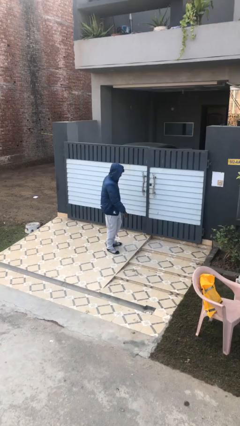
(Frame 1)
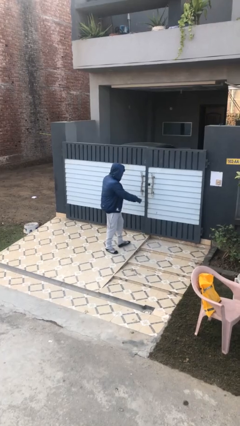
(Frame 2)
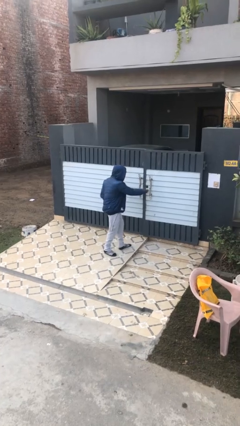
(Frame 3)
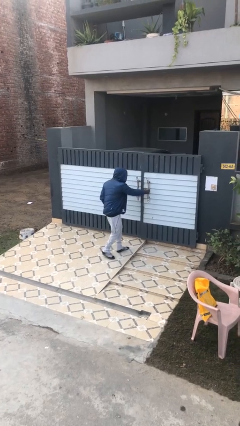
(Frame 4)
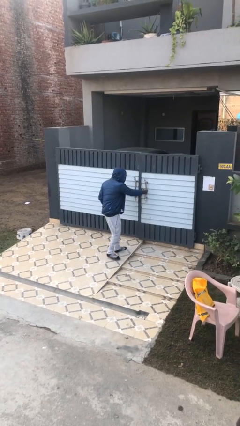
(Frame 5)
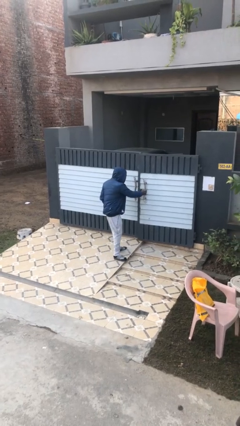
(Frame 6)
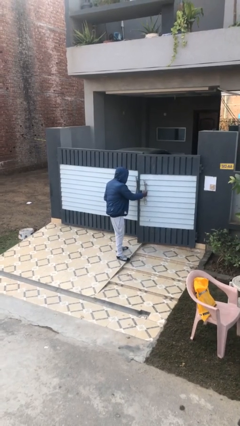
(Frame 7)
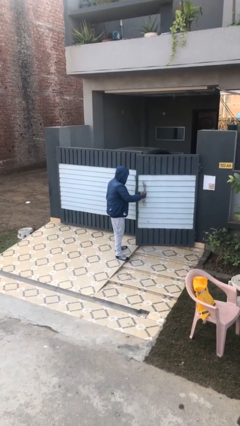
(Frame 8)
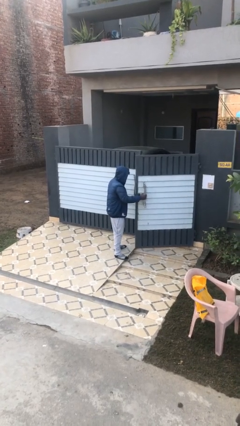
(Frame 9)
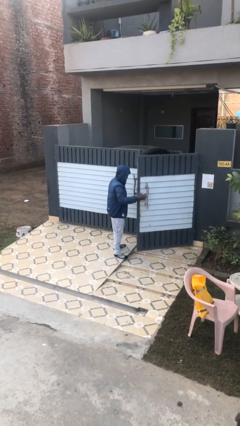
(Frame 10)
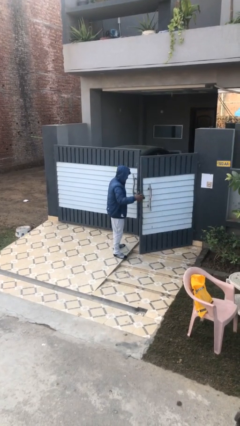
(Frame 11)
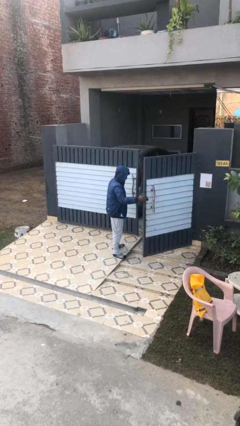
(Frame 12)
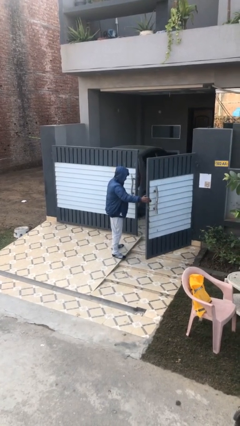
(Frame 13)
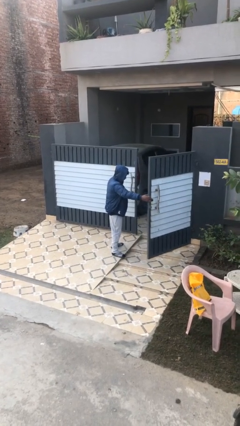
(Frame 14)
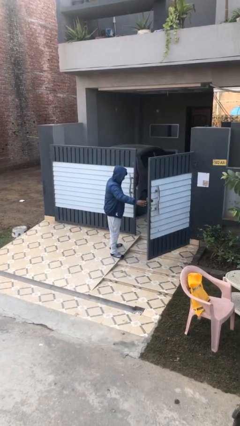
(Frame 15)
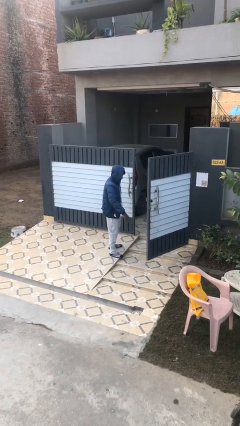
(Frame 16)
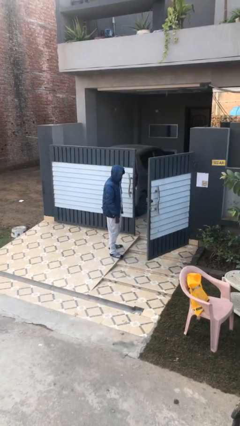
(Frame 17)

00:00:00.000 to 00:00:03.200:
person opens facility door

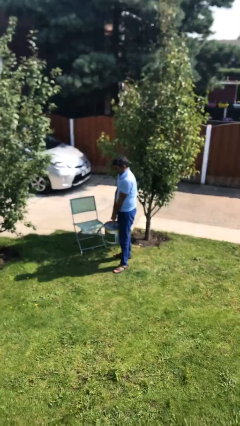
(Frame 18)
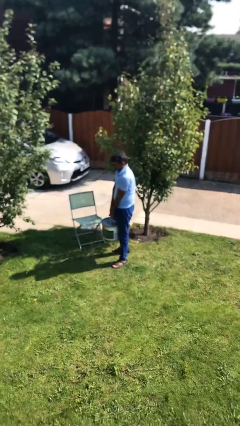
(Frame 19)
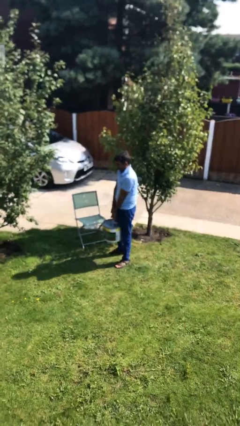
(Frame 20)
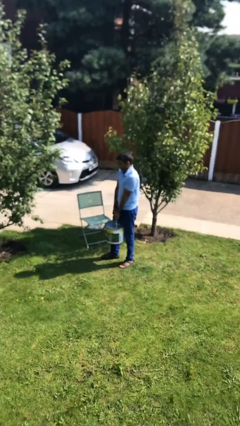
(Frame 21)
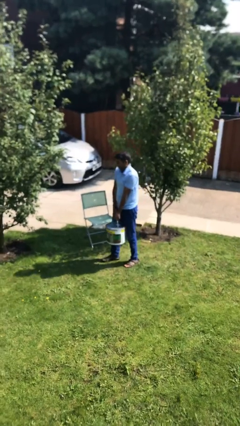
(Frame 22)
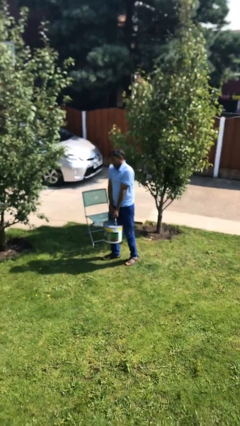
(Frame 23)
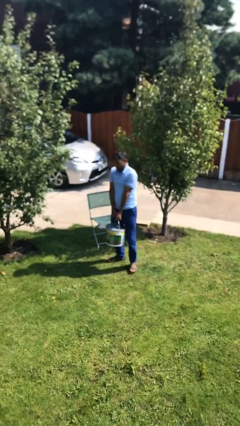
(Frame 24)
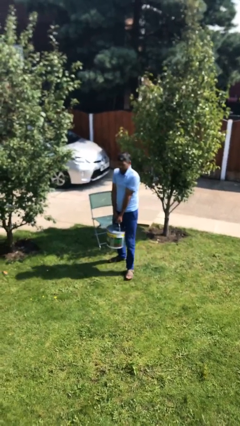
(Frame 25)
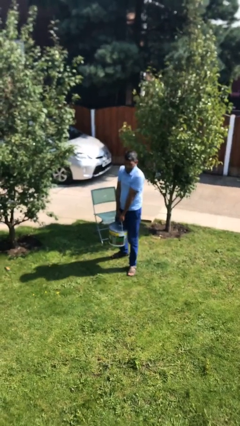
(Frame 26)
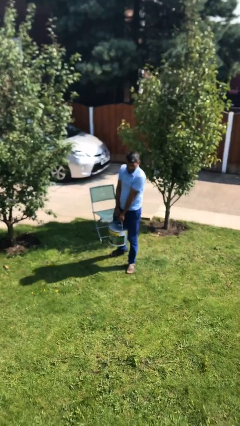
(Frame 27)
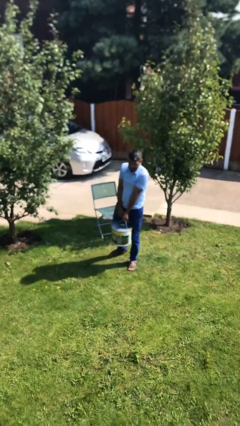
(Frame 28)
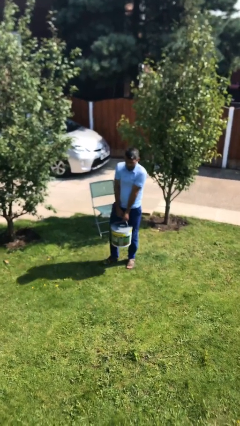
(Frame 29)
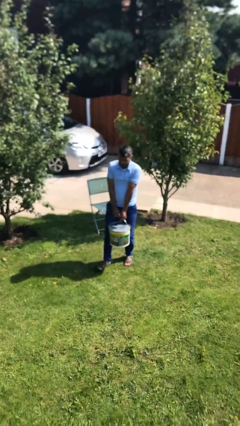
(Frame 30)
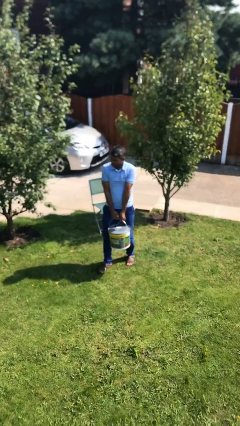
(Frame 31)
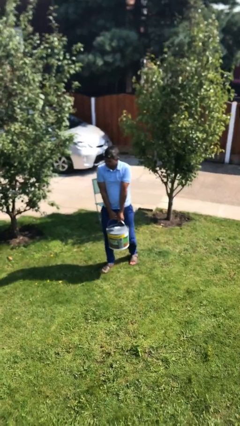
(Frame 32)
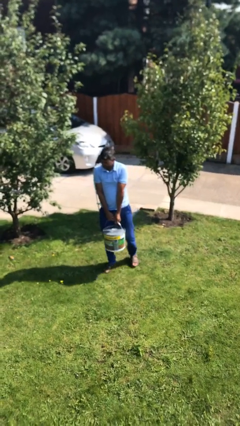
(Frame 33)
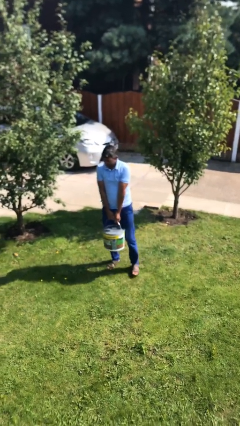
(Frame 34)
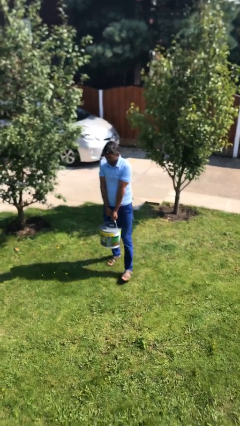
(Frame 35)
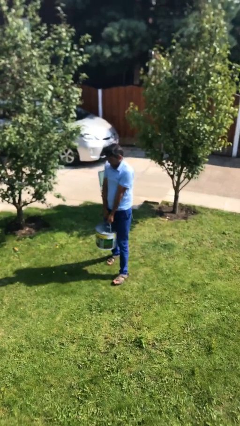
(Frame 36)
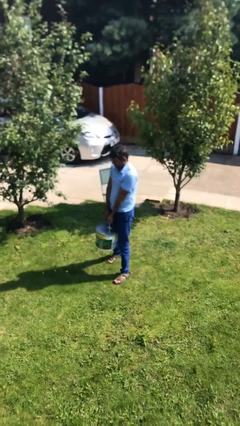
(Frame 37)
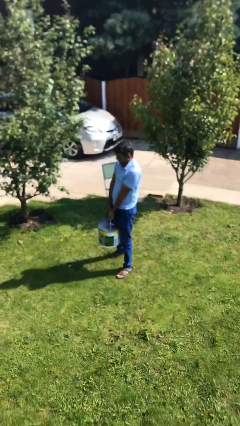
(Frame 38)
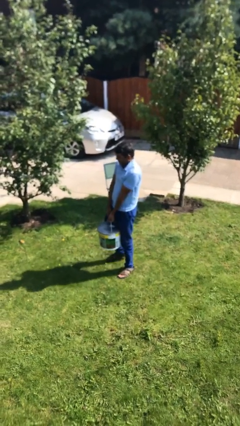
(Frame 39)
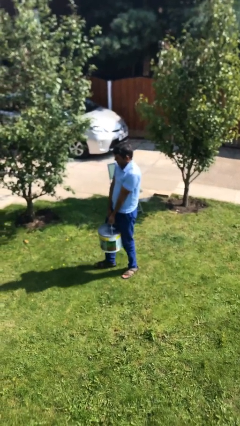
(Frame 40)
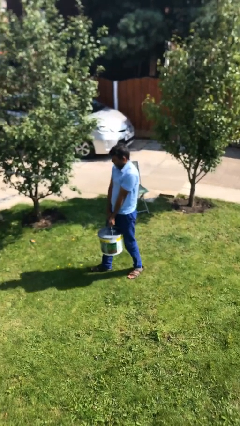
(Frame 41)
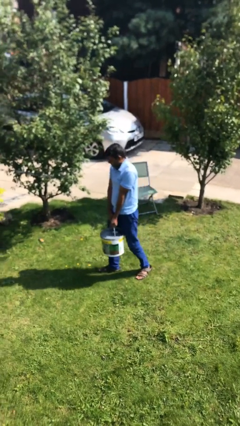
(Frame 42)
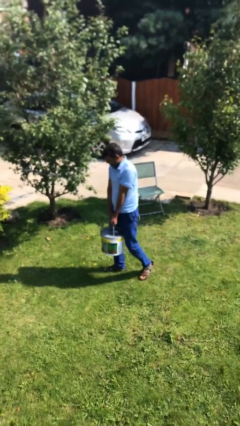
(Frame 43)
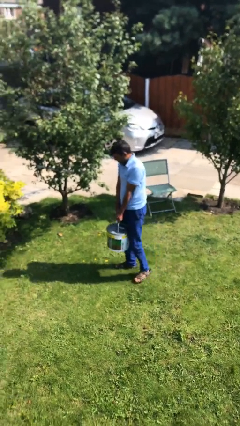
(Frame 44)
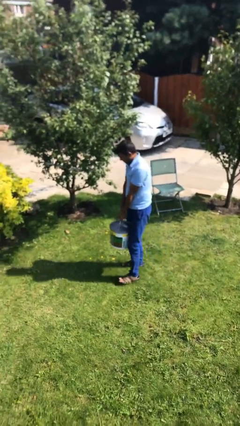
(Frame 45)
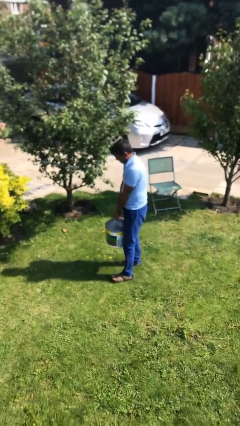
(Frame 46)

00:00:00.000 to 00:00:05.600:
person carries heavy object

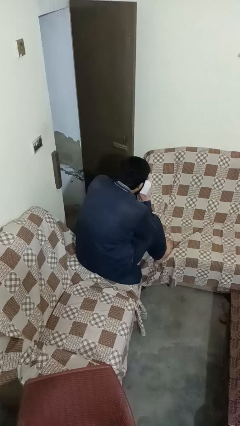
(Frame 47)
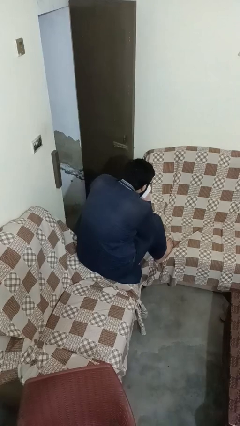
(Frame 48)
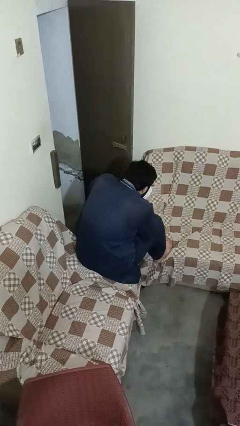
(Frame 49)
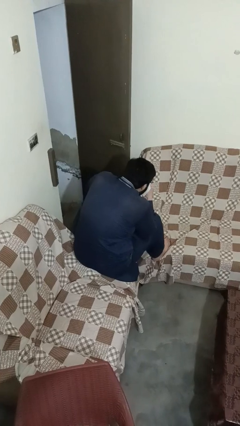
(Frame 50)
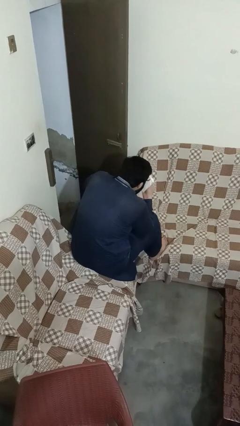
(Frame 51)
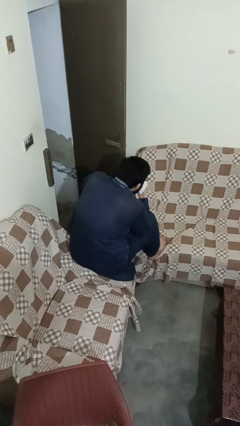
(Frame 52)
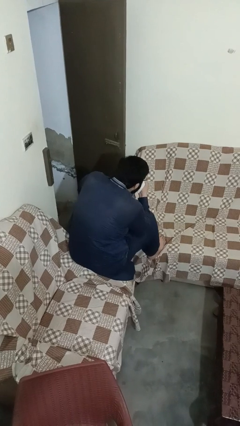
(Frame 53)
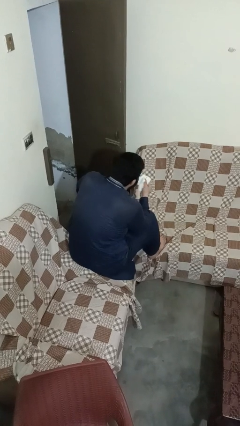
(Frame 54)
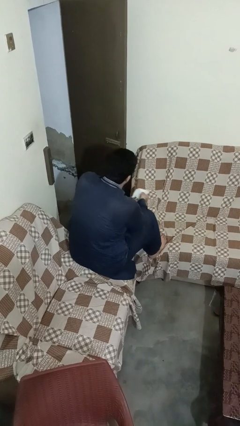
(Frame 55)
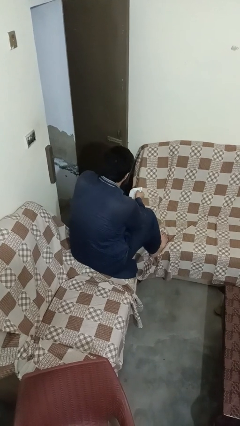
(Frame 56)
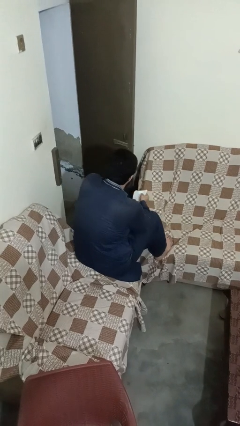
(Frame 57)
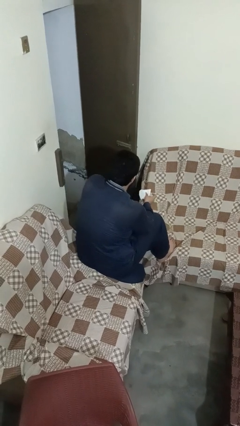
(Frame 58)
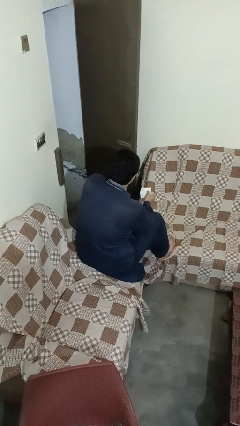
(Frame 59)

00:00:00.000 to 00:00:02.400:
person blows nose

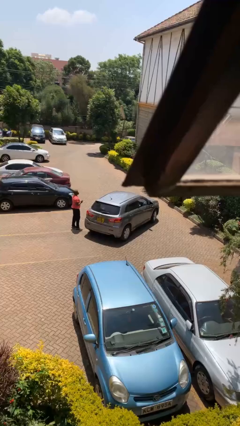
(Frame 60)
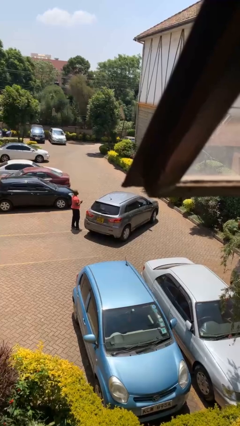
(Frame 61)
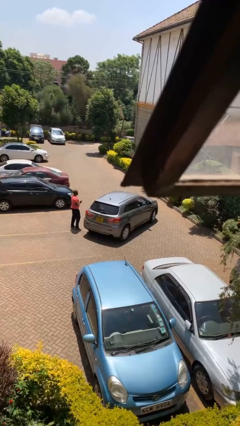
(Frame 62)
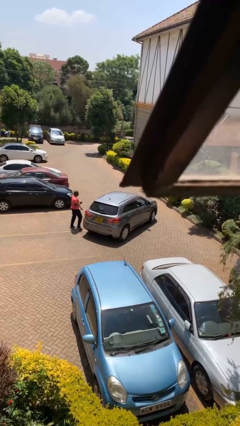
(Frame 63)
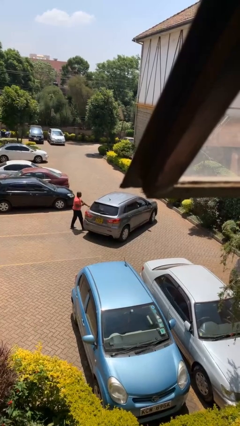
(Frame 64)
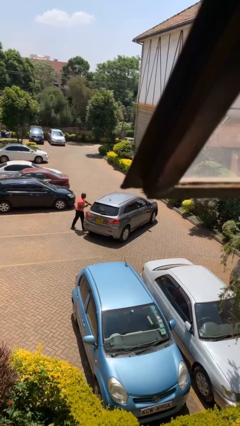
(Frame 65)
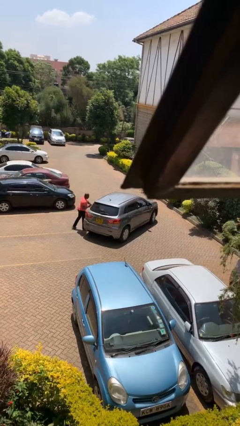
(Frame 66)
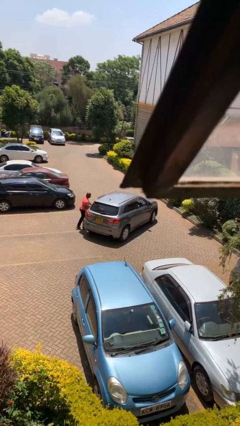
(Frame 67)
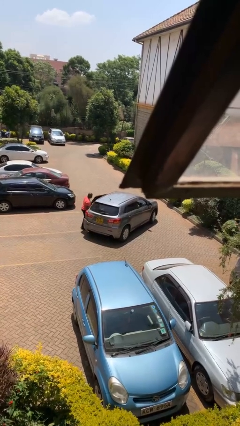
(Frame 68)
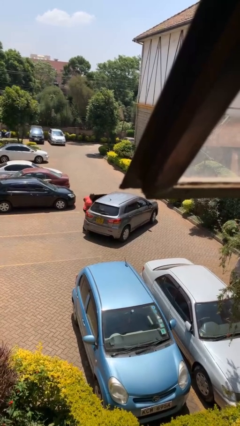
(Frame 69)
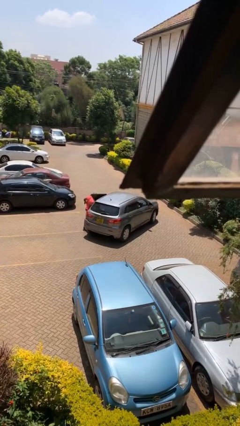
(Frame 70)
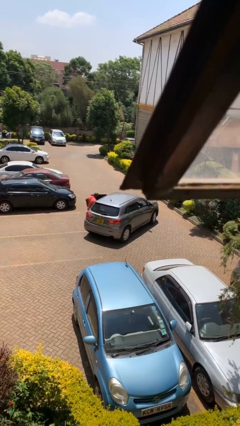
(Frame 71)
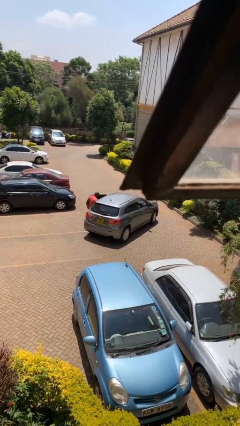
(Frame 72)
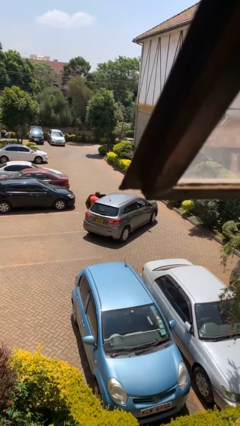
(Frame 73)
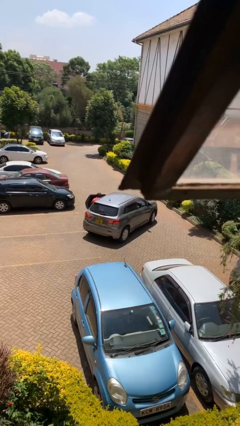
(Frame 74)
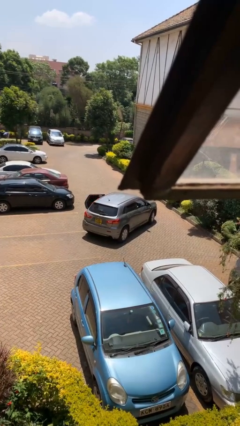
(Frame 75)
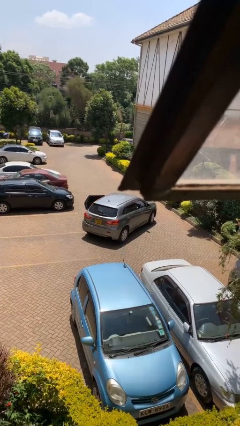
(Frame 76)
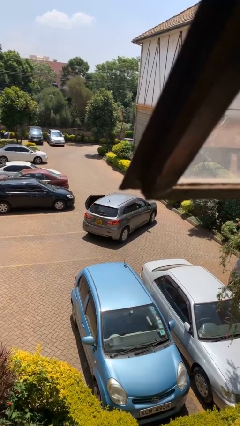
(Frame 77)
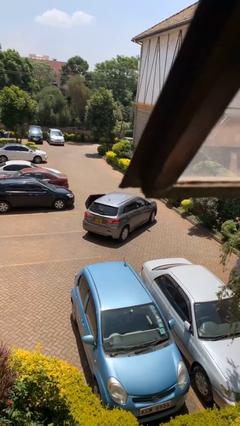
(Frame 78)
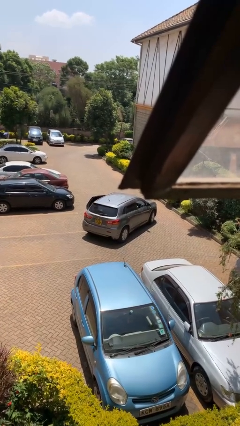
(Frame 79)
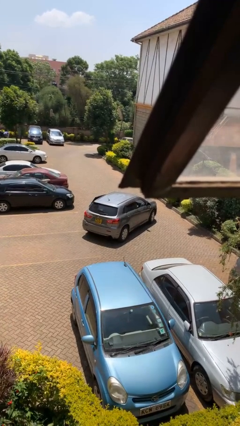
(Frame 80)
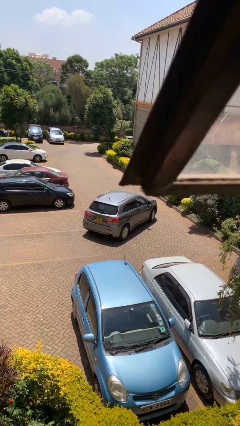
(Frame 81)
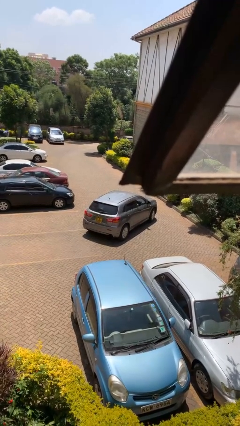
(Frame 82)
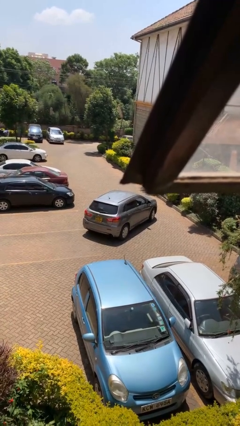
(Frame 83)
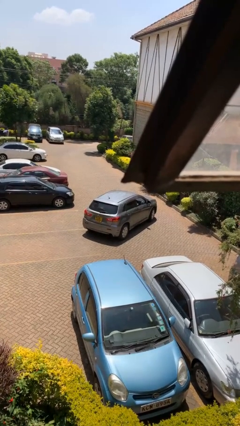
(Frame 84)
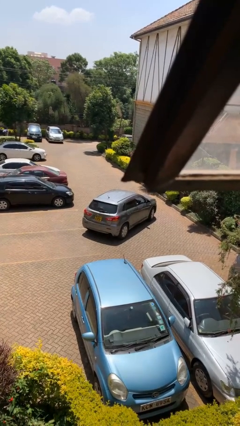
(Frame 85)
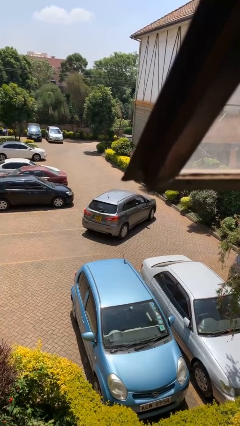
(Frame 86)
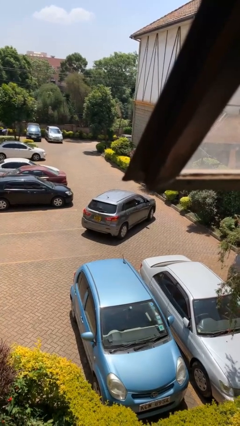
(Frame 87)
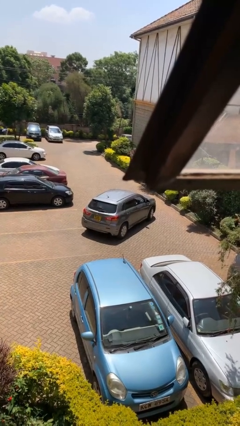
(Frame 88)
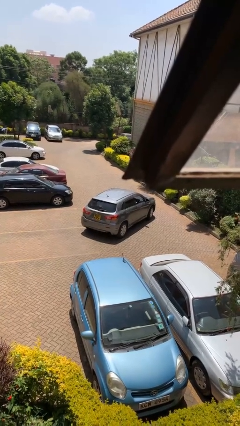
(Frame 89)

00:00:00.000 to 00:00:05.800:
car picks up person

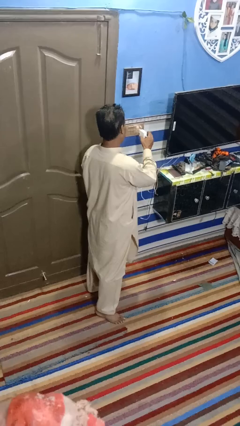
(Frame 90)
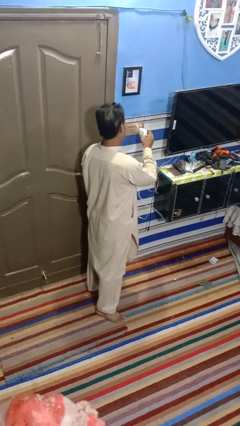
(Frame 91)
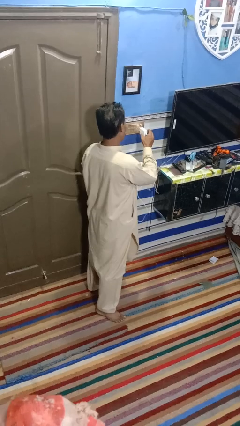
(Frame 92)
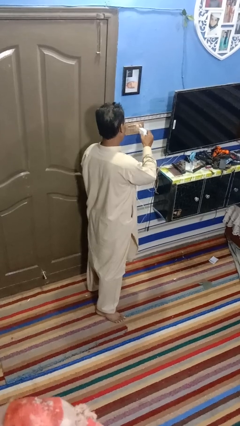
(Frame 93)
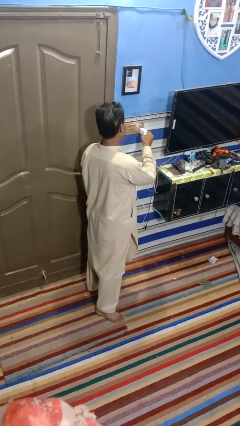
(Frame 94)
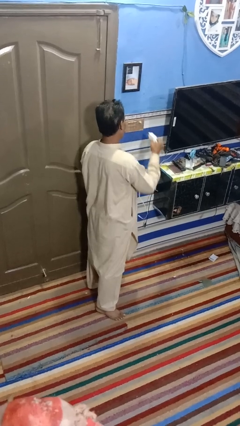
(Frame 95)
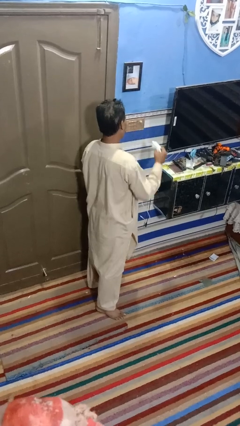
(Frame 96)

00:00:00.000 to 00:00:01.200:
person unplugs from electrical socket
